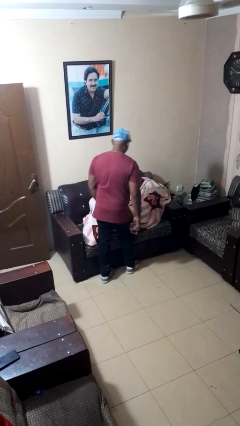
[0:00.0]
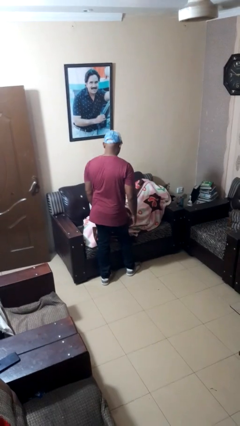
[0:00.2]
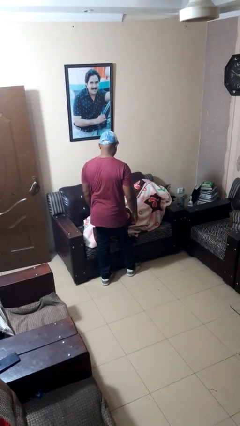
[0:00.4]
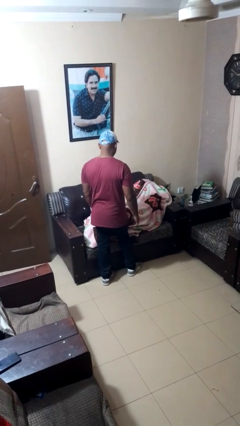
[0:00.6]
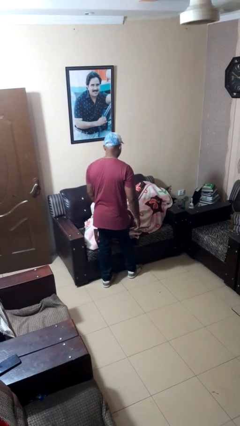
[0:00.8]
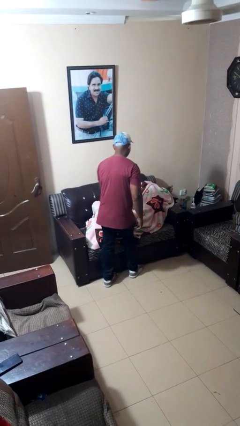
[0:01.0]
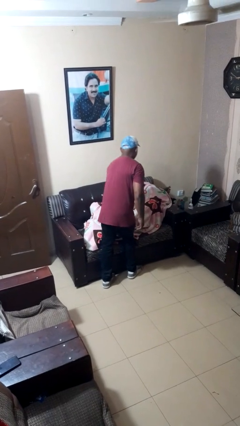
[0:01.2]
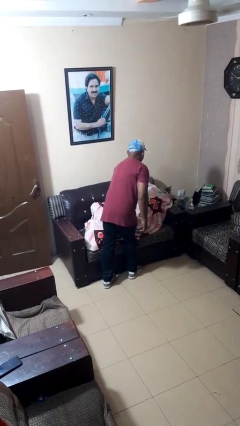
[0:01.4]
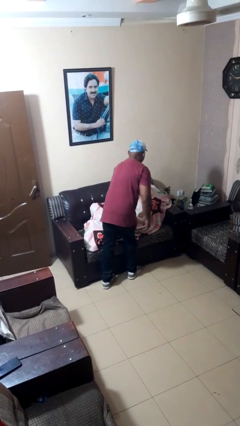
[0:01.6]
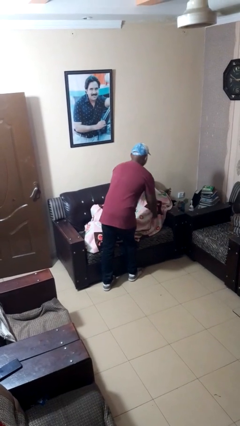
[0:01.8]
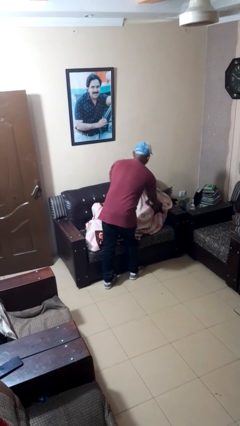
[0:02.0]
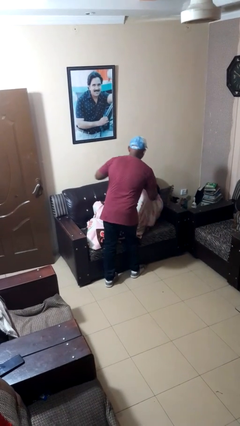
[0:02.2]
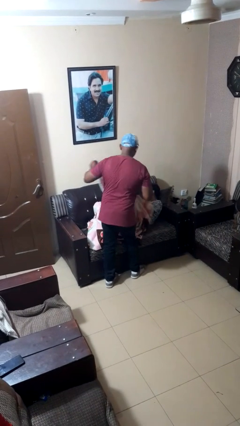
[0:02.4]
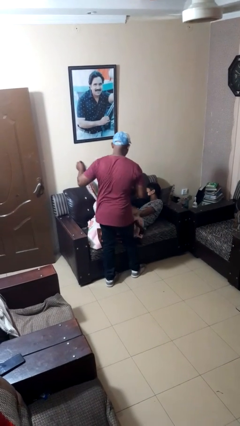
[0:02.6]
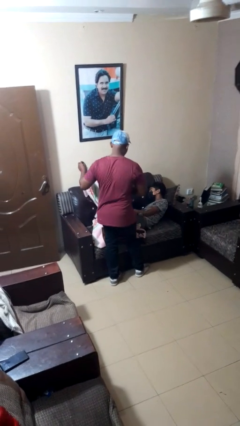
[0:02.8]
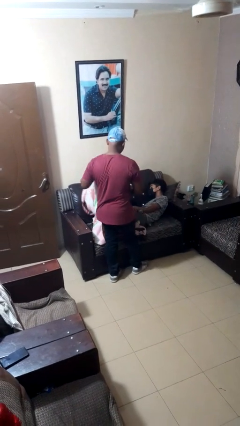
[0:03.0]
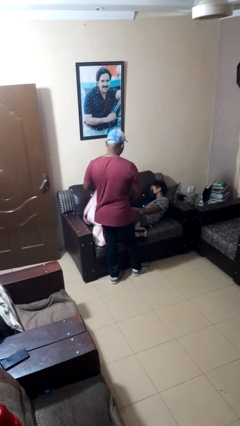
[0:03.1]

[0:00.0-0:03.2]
person uncovers friend with blanket

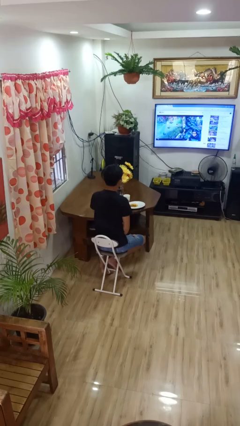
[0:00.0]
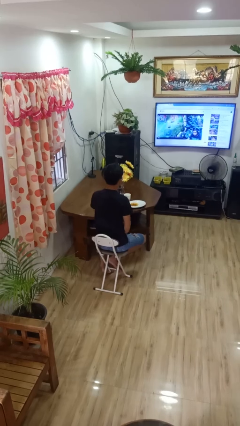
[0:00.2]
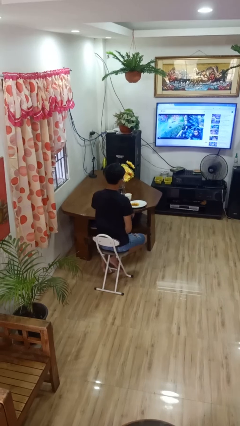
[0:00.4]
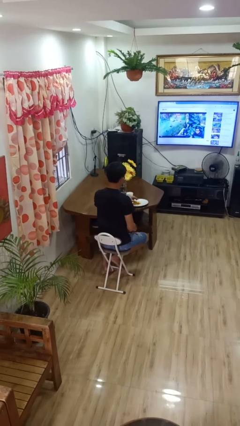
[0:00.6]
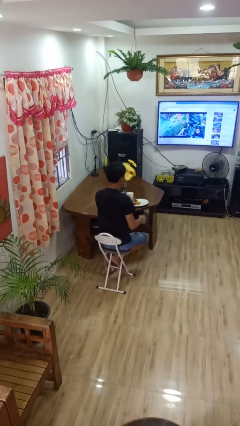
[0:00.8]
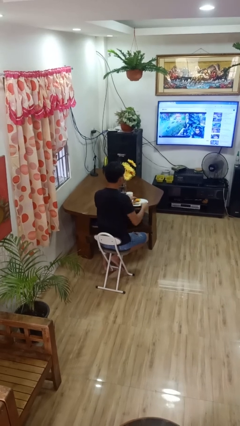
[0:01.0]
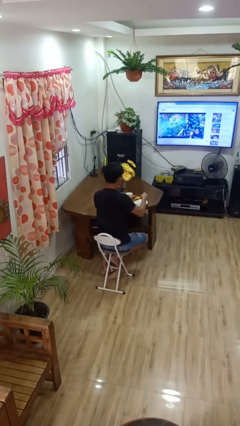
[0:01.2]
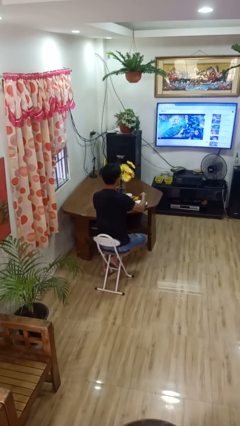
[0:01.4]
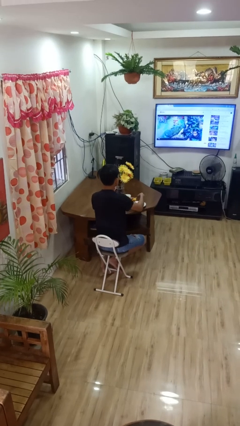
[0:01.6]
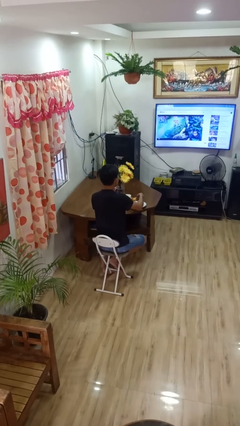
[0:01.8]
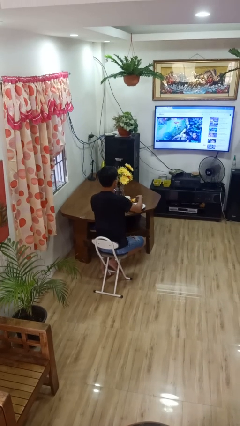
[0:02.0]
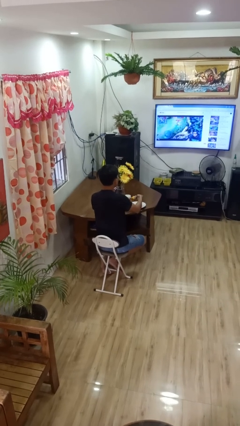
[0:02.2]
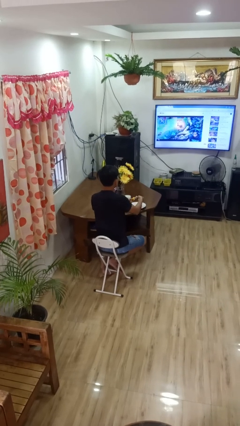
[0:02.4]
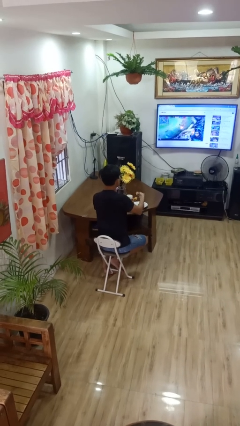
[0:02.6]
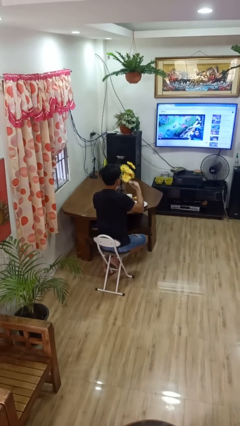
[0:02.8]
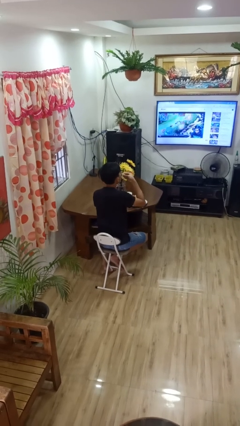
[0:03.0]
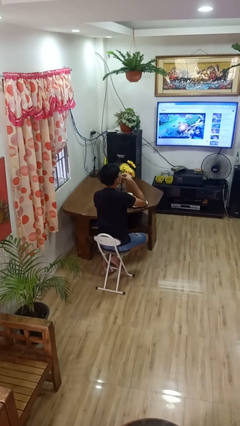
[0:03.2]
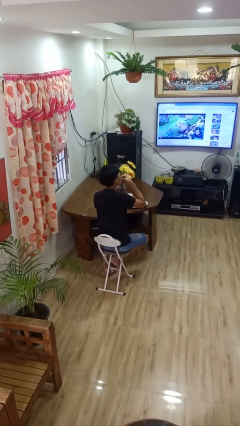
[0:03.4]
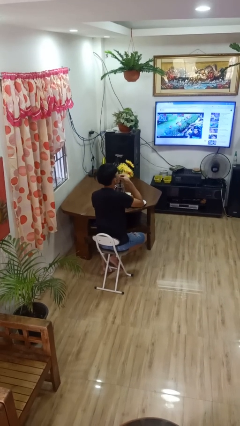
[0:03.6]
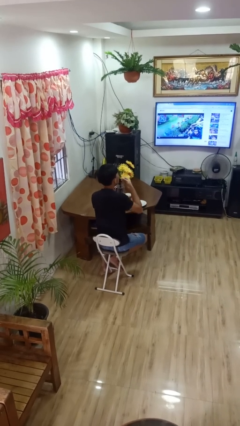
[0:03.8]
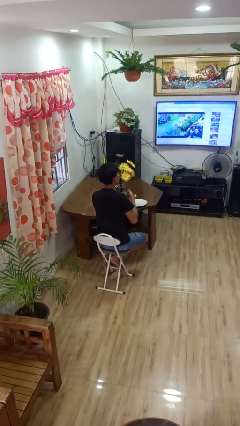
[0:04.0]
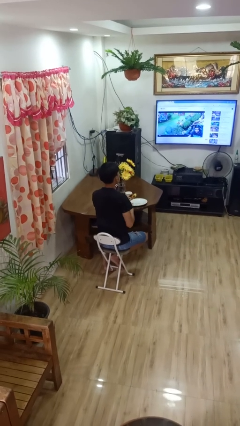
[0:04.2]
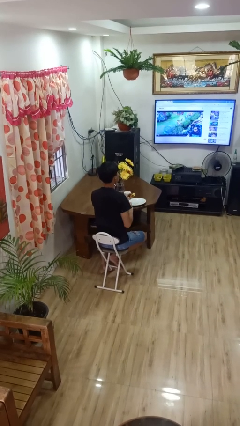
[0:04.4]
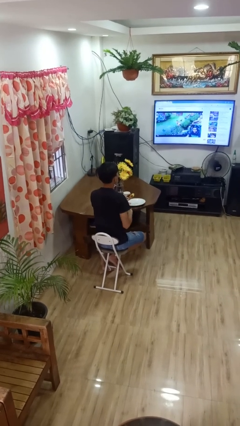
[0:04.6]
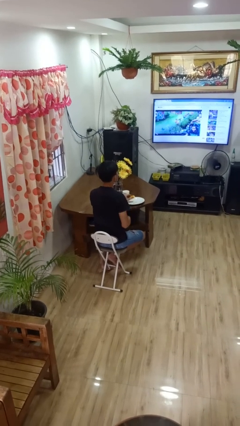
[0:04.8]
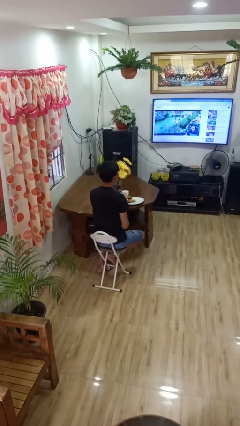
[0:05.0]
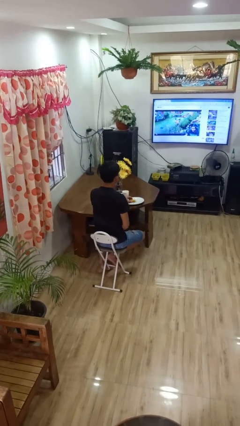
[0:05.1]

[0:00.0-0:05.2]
person eats with hands

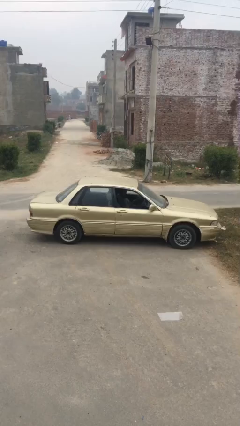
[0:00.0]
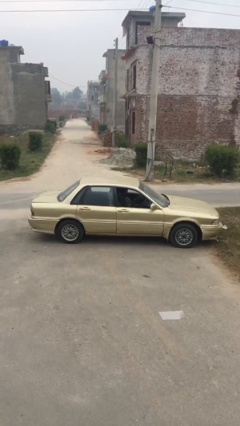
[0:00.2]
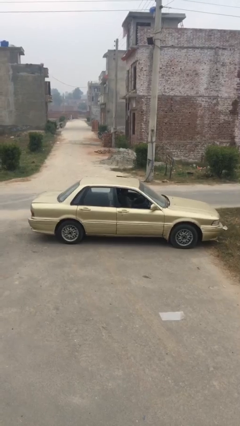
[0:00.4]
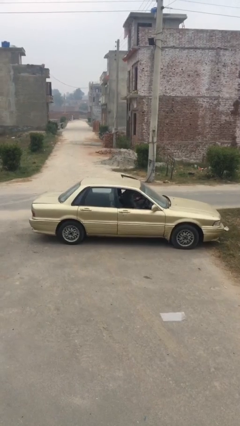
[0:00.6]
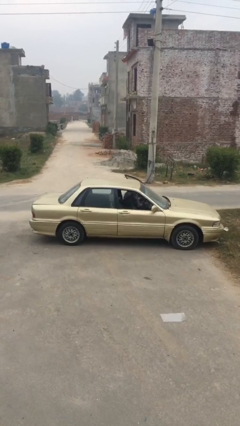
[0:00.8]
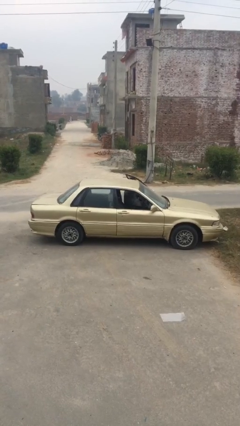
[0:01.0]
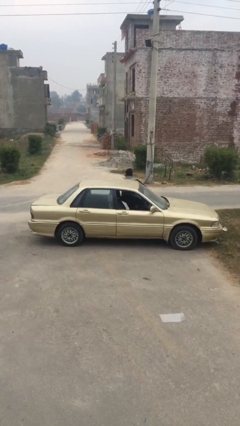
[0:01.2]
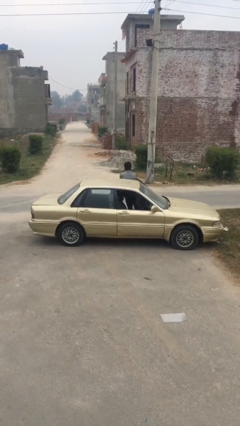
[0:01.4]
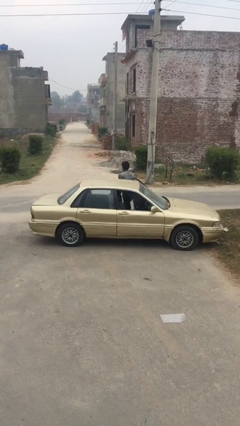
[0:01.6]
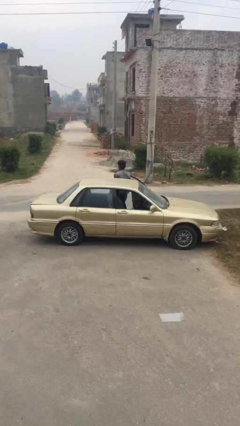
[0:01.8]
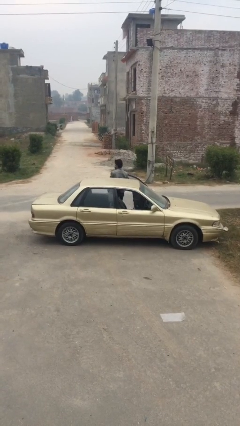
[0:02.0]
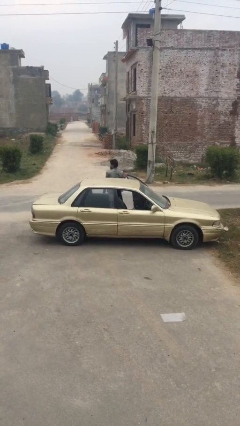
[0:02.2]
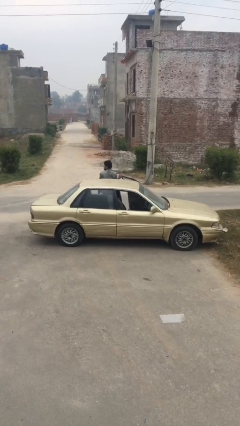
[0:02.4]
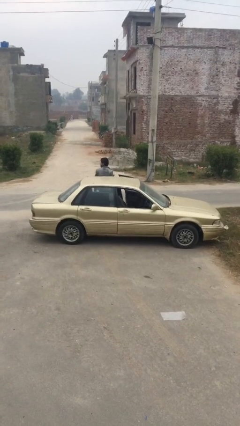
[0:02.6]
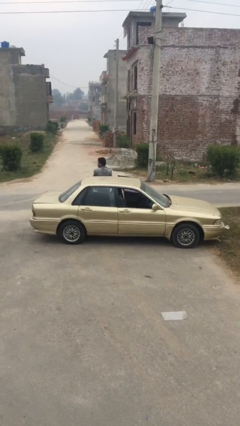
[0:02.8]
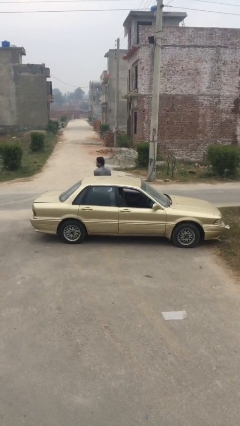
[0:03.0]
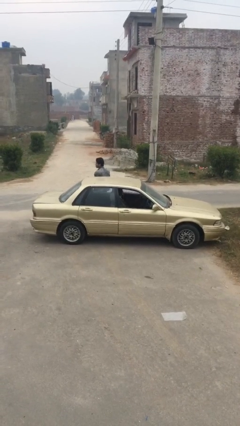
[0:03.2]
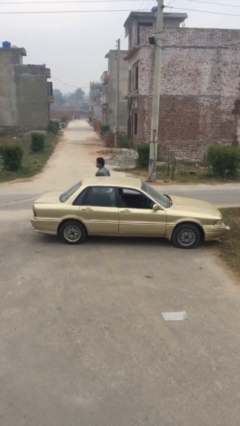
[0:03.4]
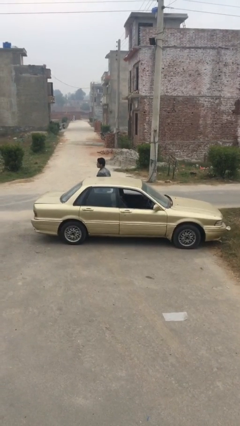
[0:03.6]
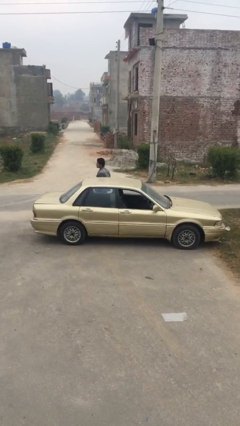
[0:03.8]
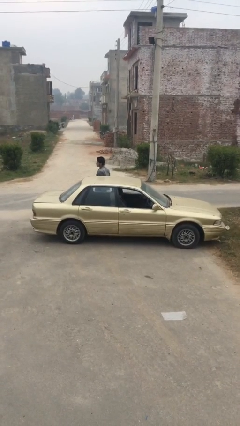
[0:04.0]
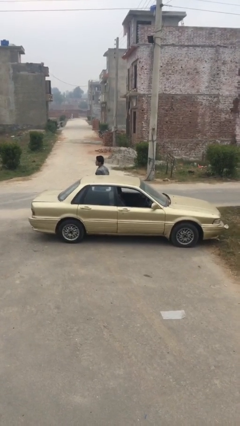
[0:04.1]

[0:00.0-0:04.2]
car drops off person

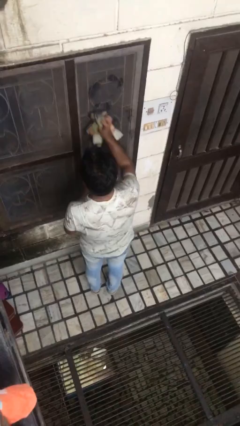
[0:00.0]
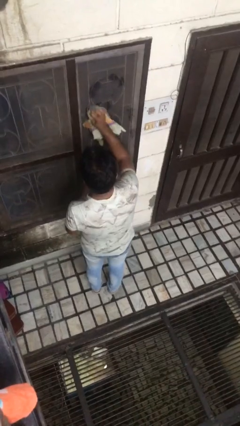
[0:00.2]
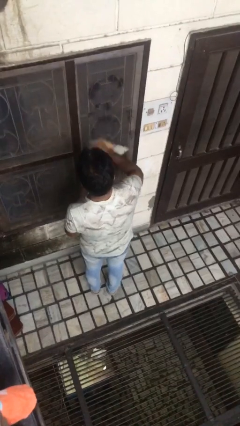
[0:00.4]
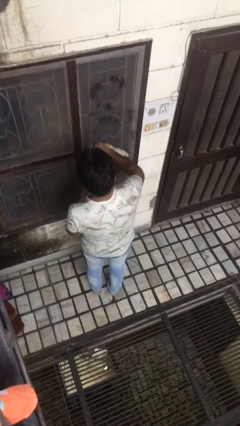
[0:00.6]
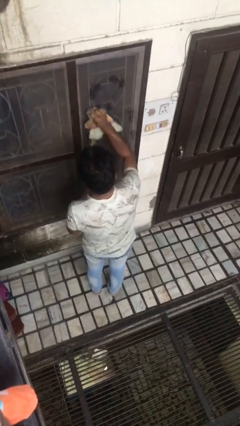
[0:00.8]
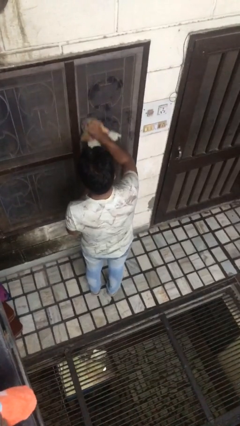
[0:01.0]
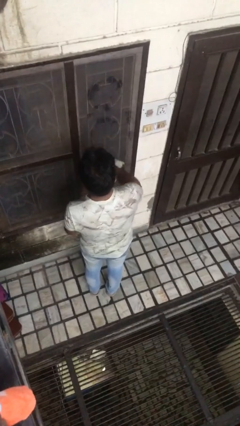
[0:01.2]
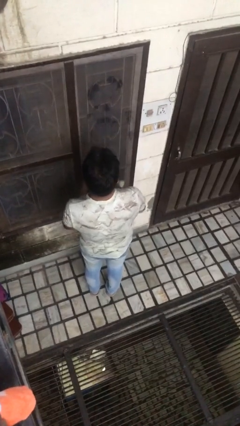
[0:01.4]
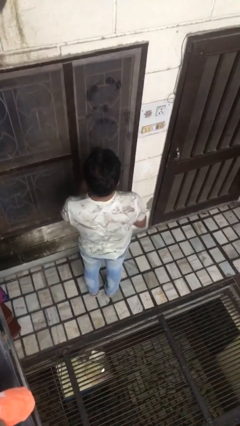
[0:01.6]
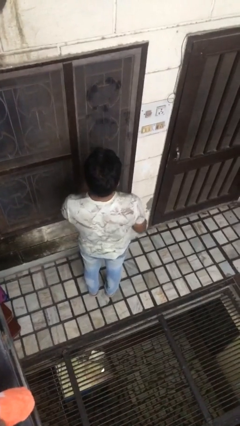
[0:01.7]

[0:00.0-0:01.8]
person washes window

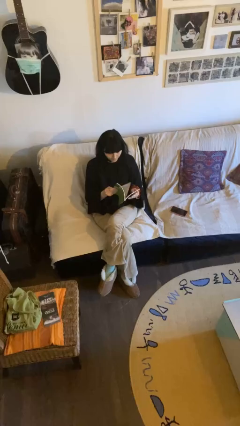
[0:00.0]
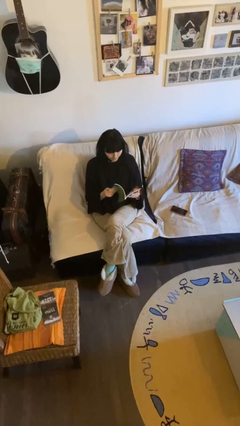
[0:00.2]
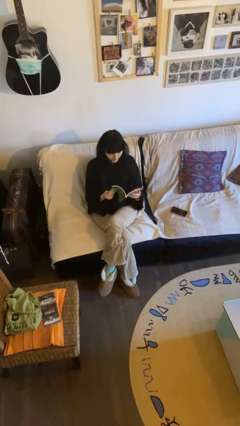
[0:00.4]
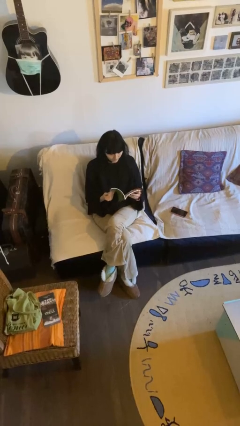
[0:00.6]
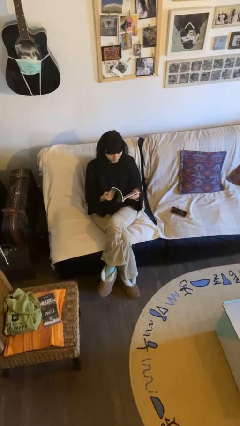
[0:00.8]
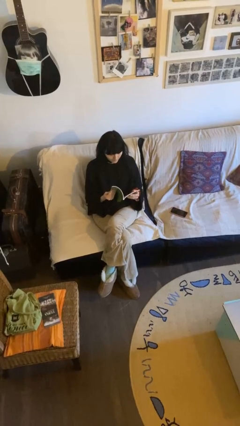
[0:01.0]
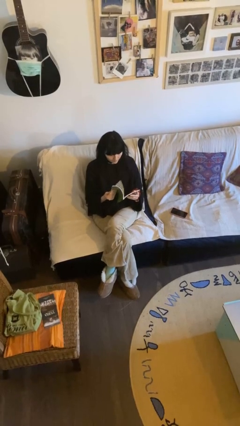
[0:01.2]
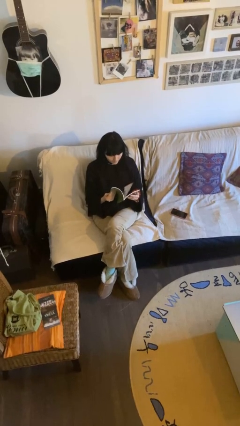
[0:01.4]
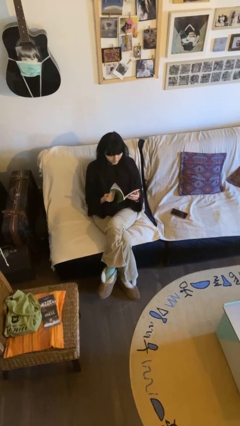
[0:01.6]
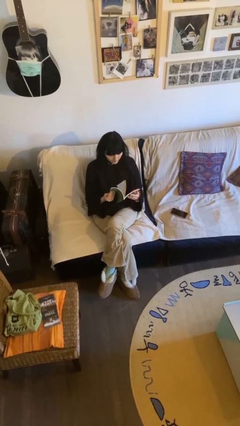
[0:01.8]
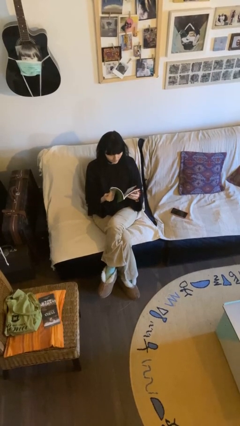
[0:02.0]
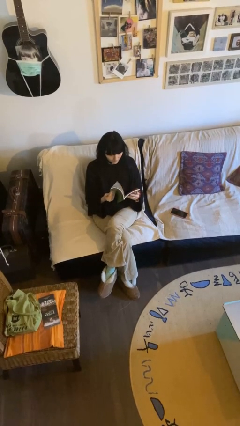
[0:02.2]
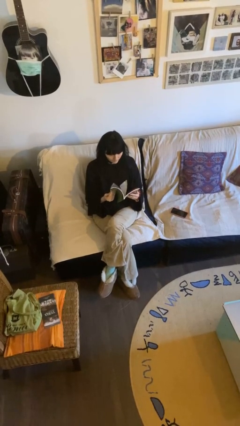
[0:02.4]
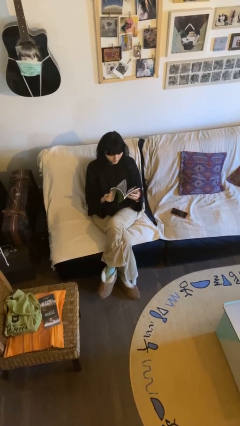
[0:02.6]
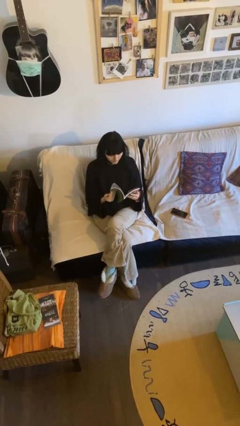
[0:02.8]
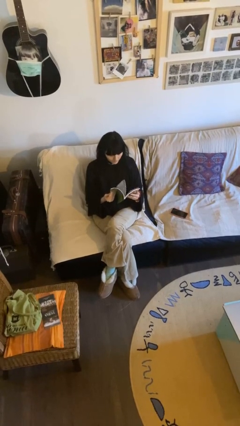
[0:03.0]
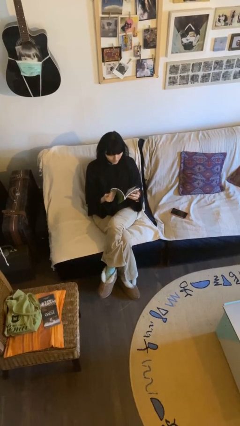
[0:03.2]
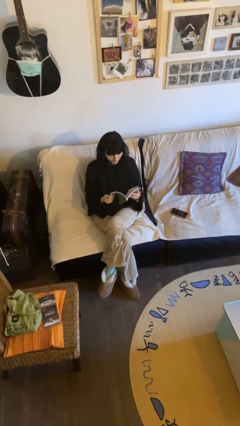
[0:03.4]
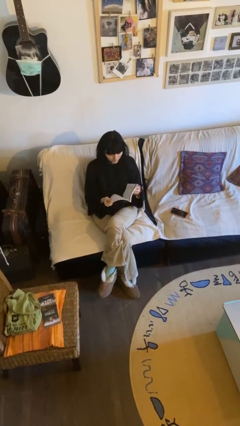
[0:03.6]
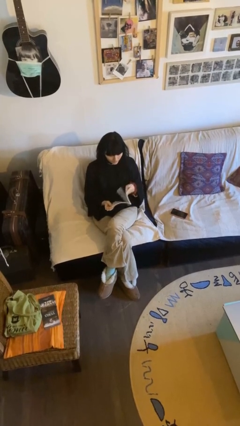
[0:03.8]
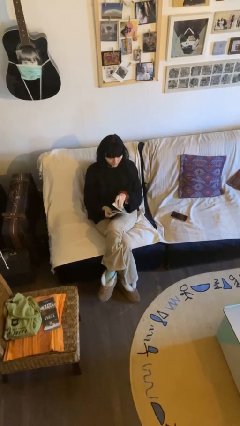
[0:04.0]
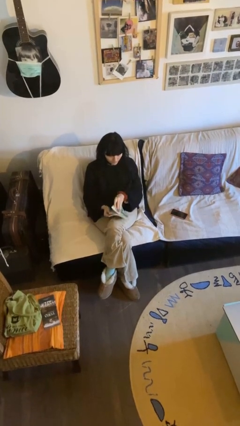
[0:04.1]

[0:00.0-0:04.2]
person reads document
